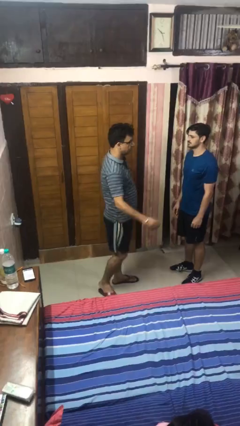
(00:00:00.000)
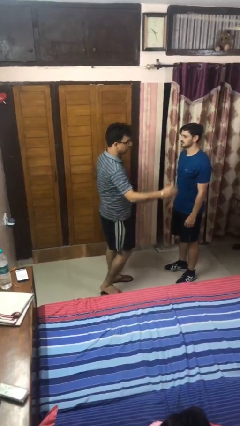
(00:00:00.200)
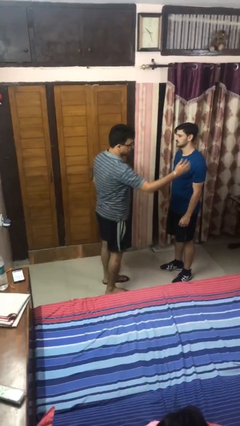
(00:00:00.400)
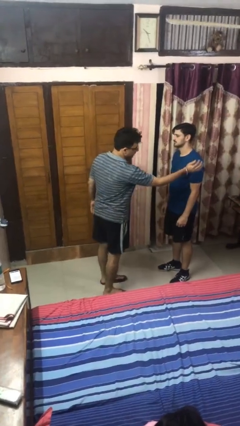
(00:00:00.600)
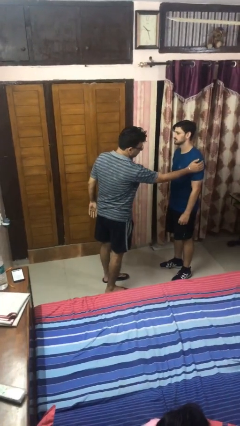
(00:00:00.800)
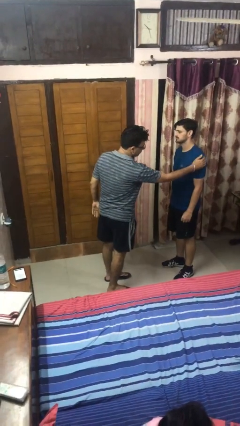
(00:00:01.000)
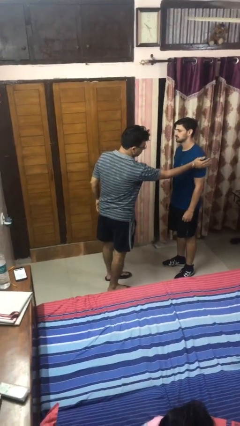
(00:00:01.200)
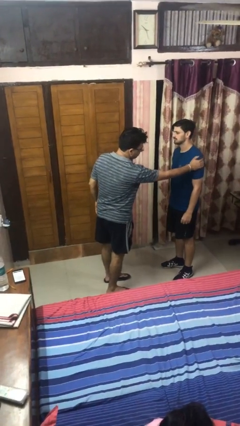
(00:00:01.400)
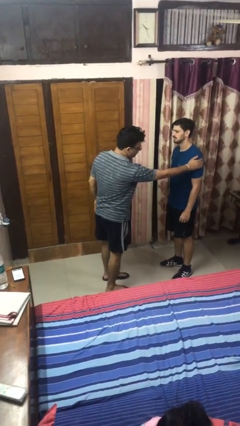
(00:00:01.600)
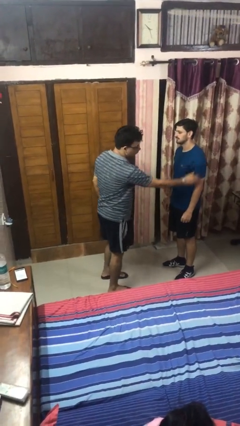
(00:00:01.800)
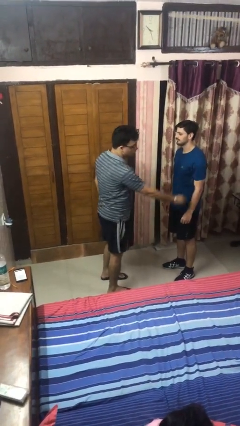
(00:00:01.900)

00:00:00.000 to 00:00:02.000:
person pounds shoulders of person

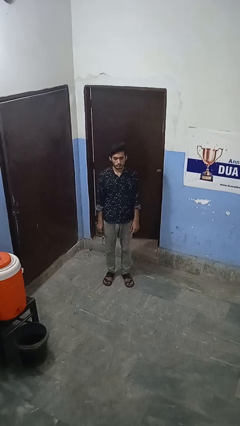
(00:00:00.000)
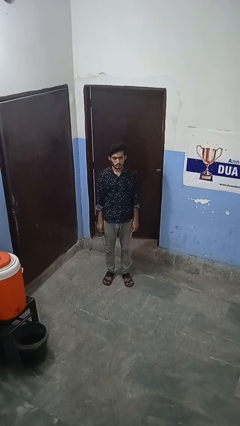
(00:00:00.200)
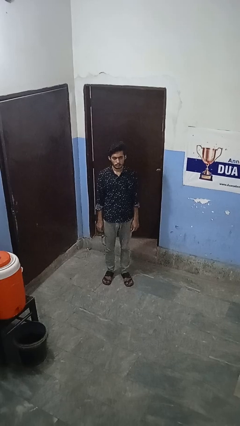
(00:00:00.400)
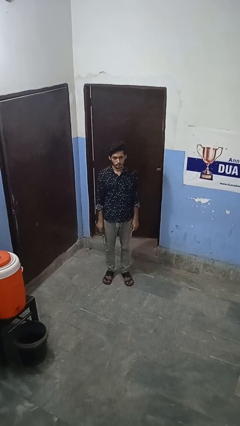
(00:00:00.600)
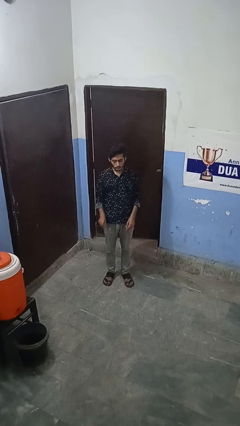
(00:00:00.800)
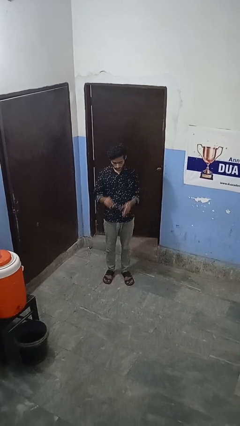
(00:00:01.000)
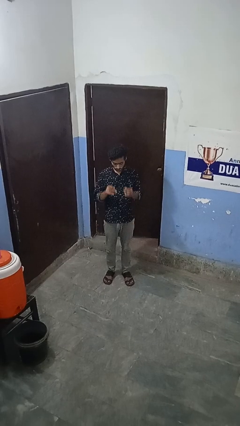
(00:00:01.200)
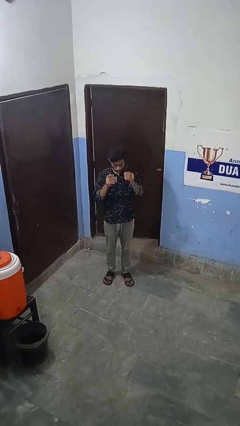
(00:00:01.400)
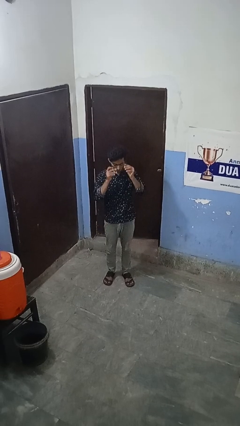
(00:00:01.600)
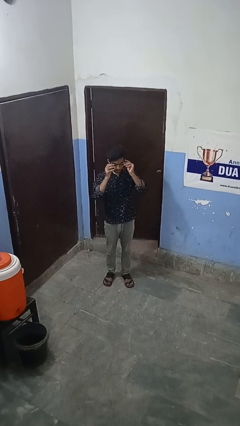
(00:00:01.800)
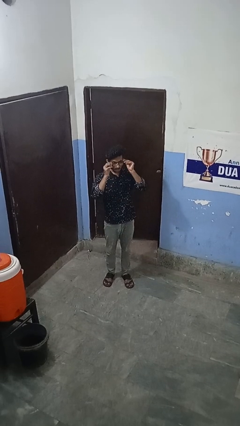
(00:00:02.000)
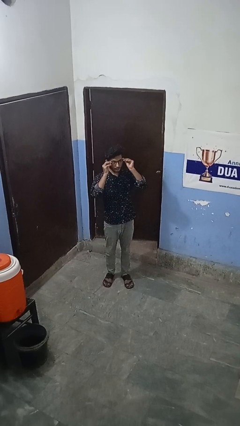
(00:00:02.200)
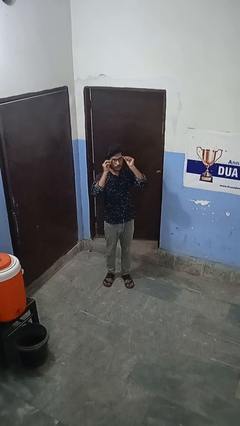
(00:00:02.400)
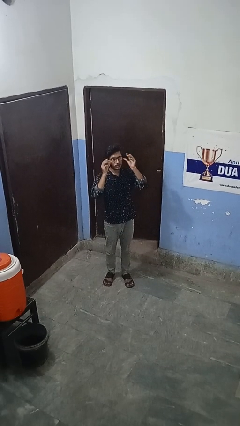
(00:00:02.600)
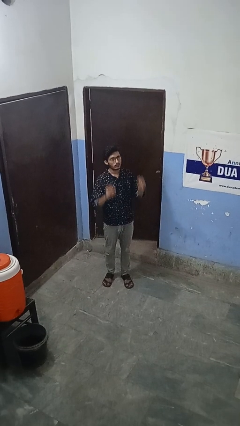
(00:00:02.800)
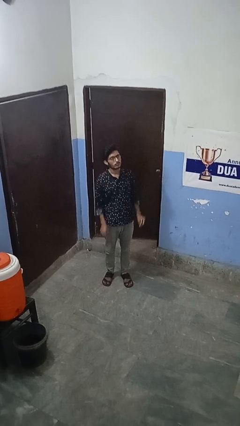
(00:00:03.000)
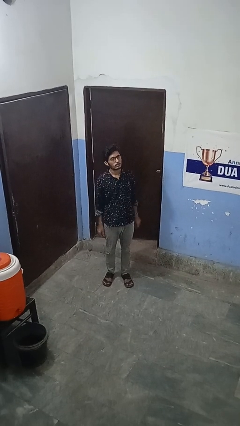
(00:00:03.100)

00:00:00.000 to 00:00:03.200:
person puts on glasses

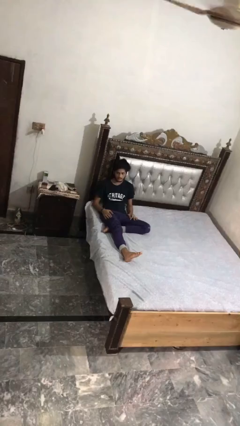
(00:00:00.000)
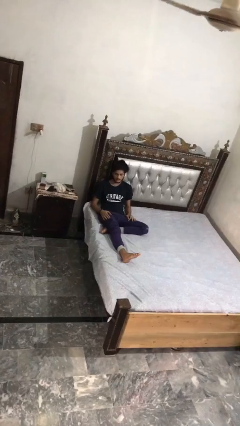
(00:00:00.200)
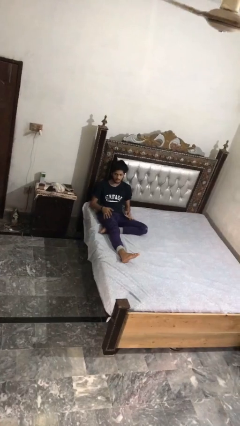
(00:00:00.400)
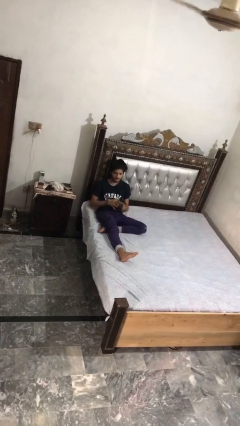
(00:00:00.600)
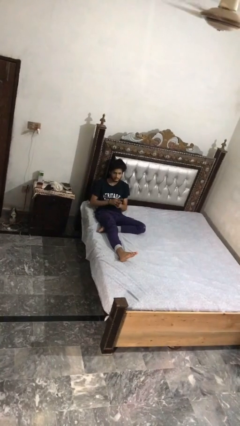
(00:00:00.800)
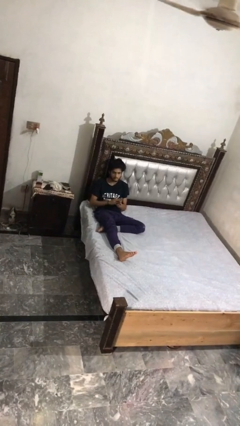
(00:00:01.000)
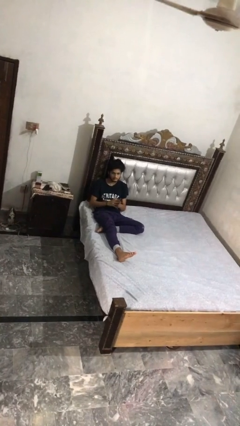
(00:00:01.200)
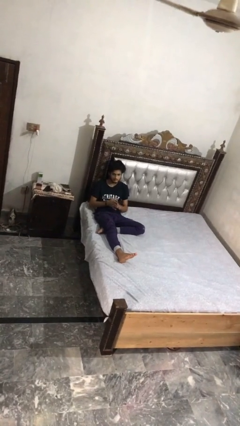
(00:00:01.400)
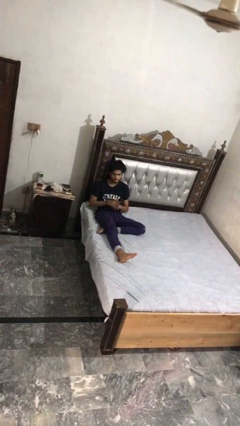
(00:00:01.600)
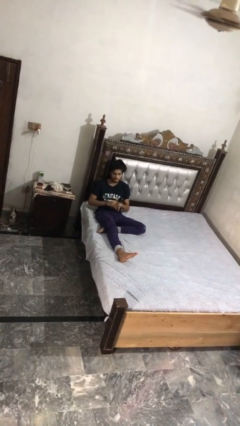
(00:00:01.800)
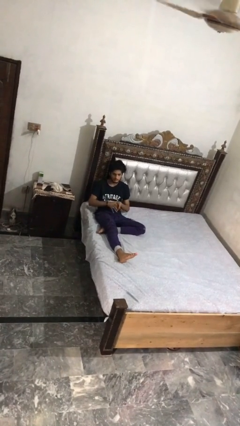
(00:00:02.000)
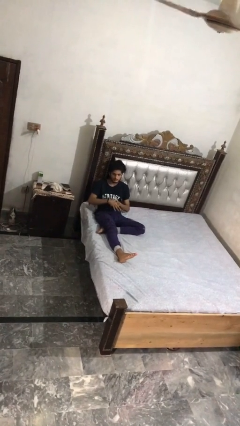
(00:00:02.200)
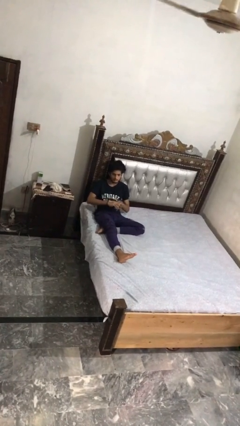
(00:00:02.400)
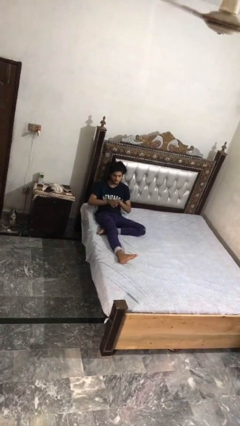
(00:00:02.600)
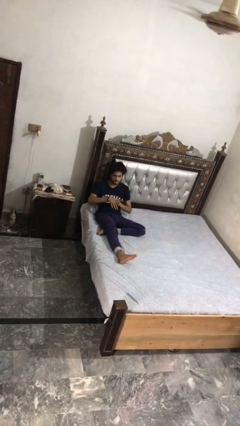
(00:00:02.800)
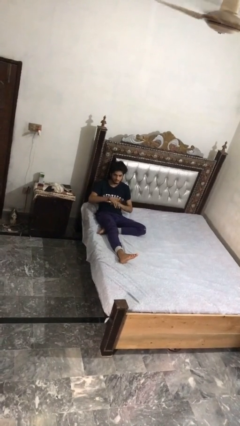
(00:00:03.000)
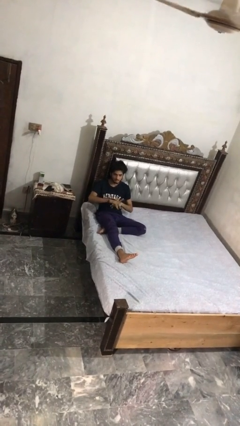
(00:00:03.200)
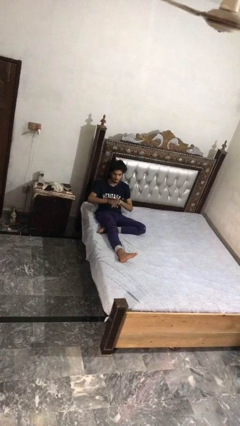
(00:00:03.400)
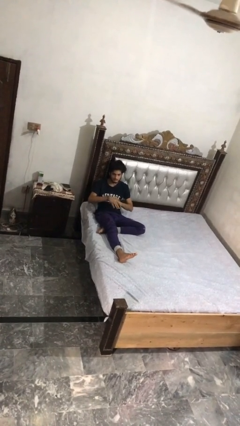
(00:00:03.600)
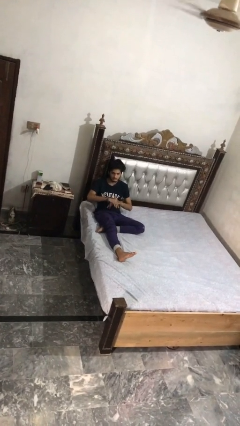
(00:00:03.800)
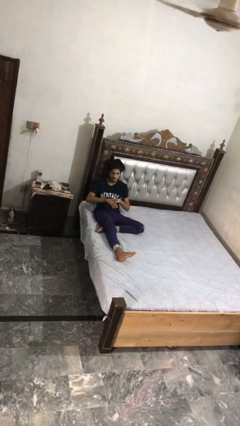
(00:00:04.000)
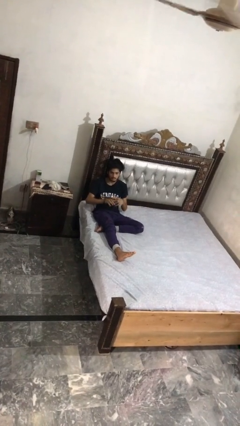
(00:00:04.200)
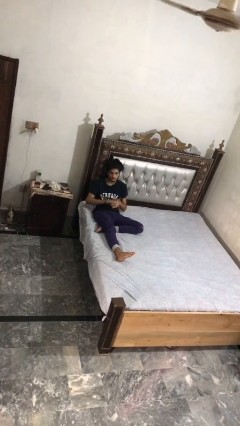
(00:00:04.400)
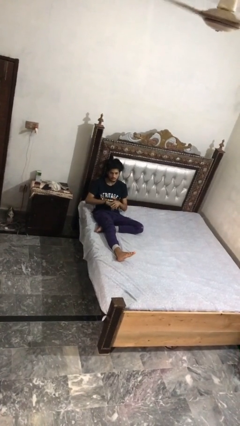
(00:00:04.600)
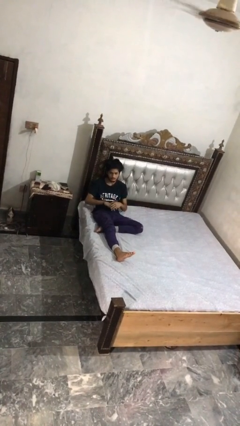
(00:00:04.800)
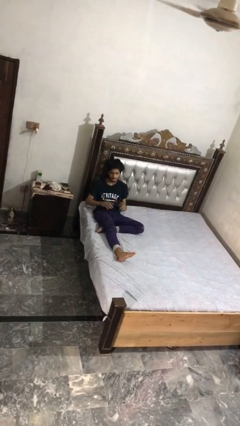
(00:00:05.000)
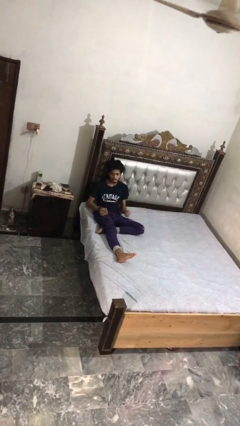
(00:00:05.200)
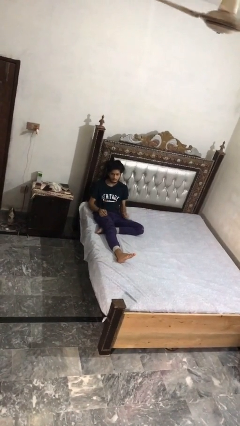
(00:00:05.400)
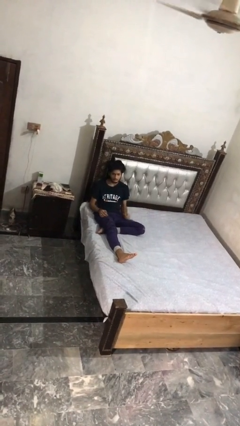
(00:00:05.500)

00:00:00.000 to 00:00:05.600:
person cracks knuckles

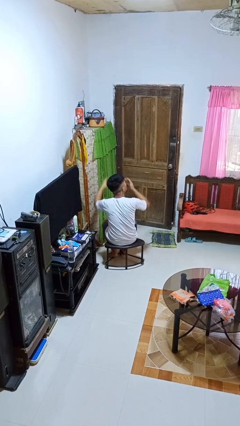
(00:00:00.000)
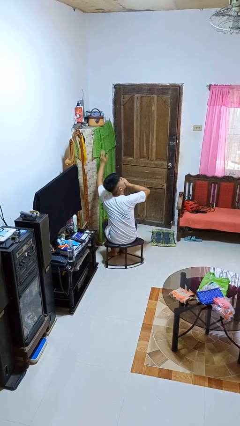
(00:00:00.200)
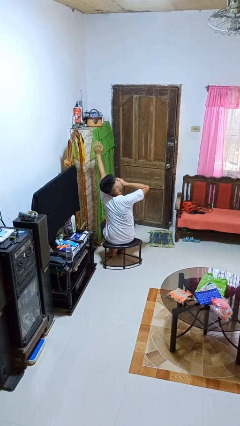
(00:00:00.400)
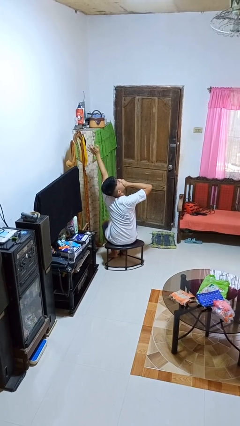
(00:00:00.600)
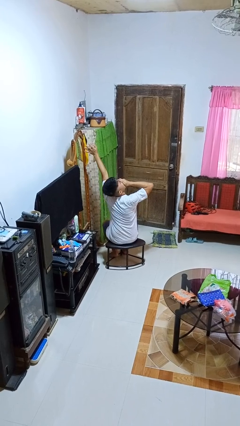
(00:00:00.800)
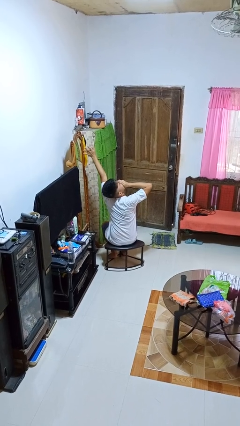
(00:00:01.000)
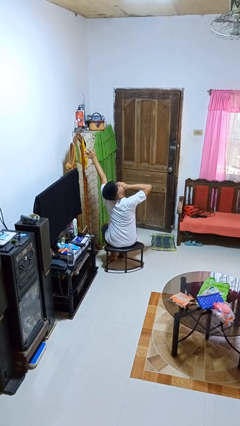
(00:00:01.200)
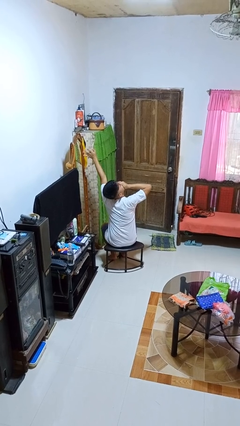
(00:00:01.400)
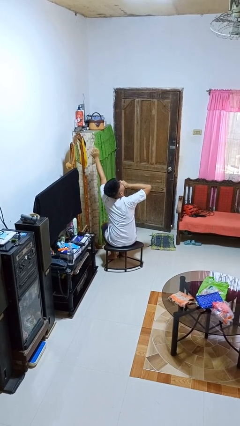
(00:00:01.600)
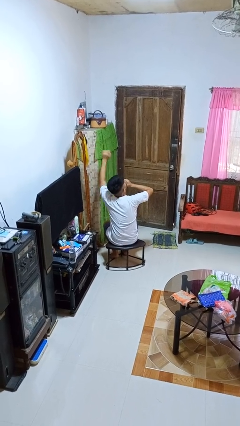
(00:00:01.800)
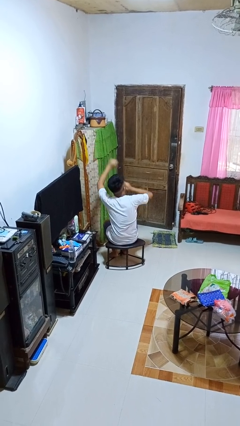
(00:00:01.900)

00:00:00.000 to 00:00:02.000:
person yawns

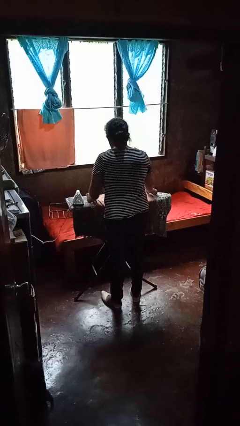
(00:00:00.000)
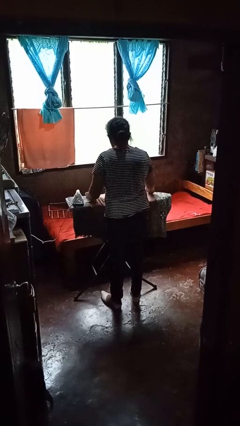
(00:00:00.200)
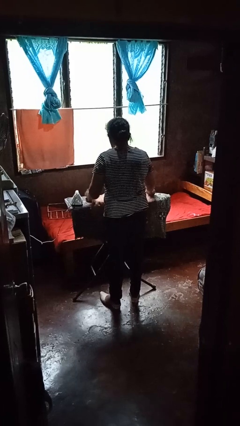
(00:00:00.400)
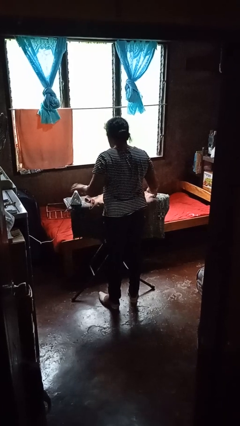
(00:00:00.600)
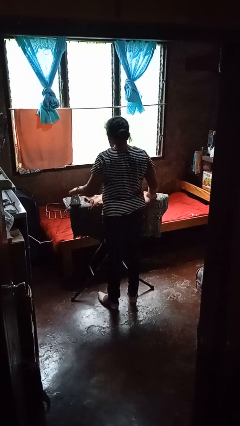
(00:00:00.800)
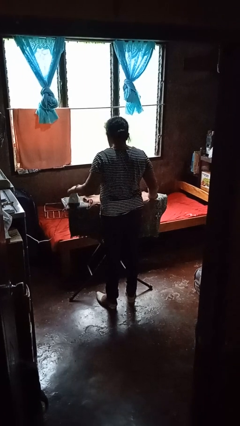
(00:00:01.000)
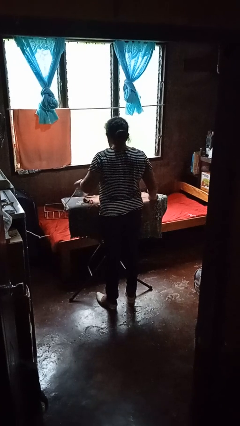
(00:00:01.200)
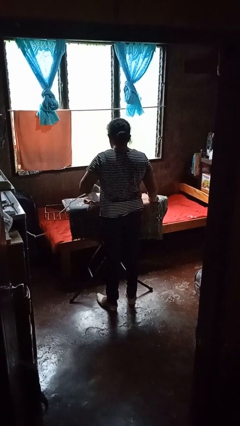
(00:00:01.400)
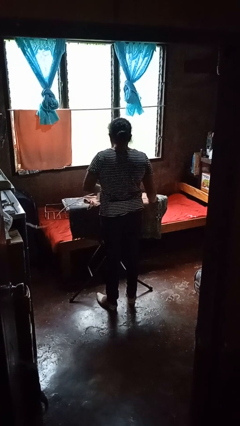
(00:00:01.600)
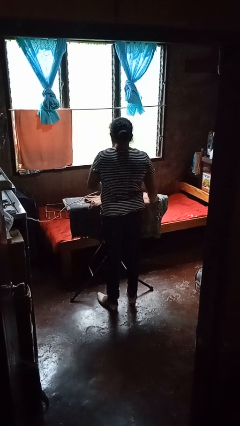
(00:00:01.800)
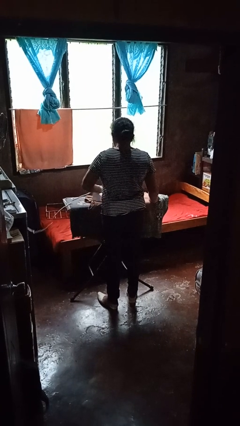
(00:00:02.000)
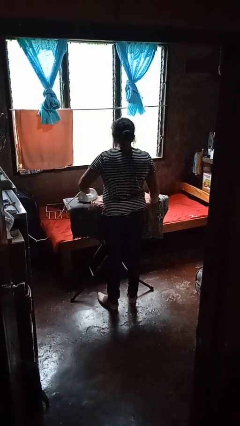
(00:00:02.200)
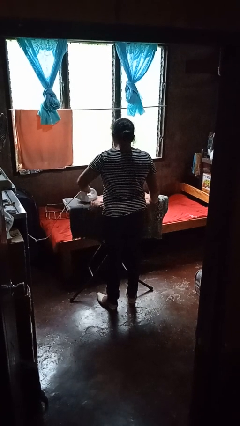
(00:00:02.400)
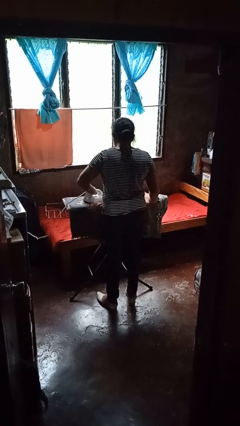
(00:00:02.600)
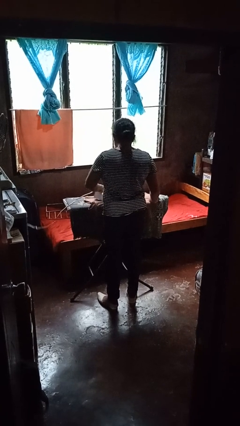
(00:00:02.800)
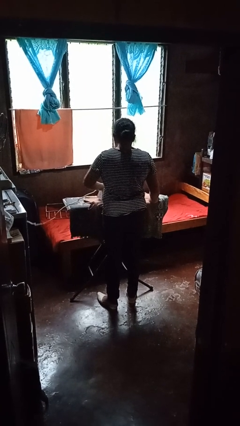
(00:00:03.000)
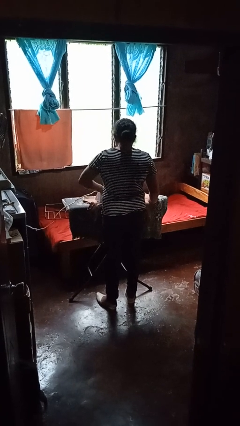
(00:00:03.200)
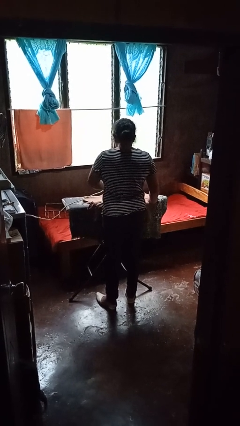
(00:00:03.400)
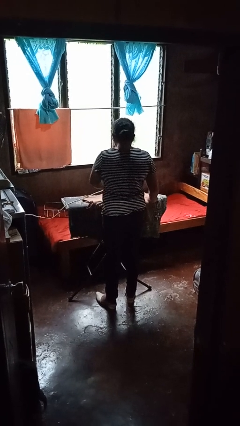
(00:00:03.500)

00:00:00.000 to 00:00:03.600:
person irons clothes

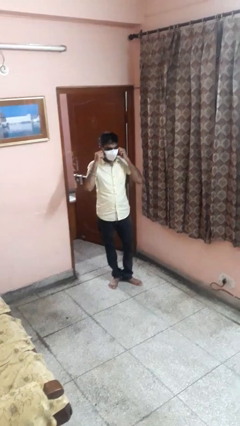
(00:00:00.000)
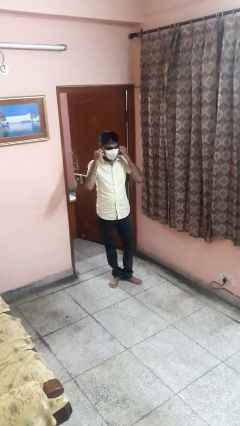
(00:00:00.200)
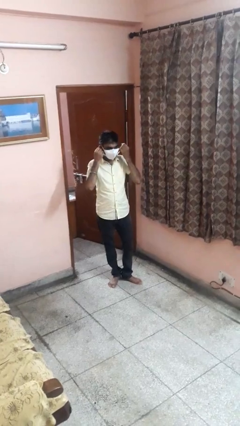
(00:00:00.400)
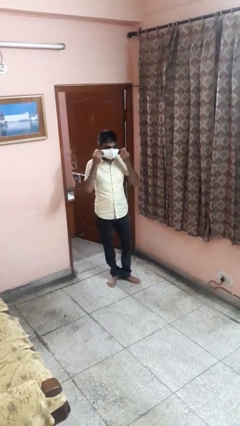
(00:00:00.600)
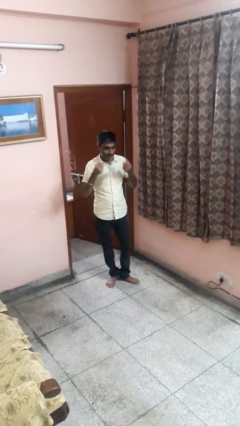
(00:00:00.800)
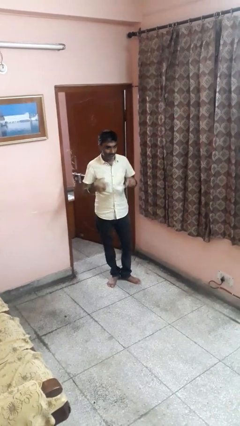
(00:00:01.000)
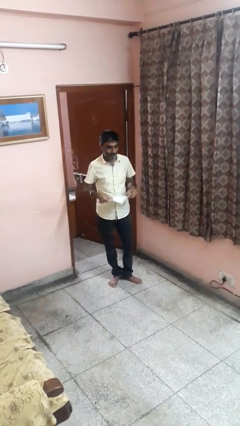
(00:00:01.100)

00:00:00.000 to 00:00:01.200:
person takes off facemask
